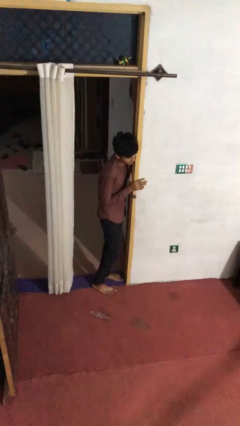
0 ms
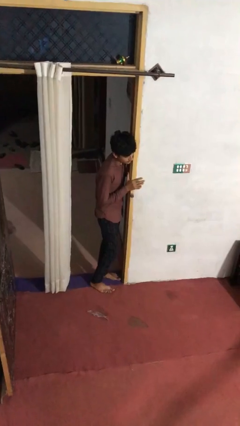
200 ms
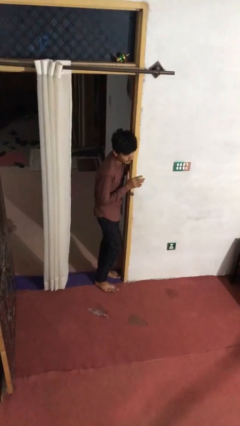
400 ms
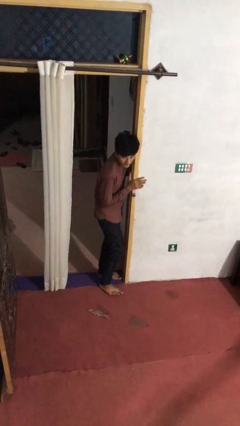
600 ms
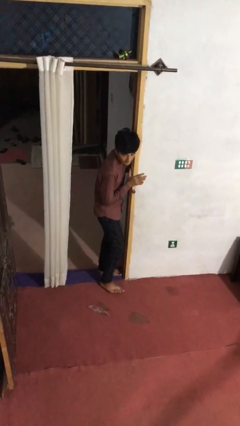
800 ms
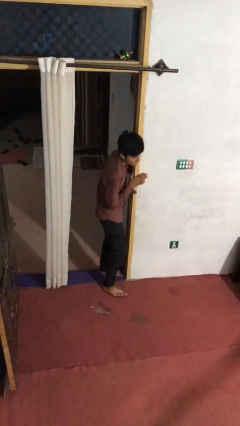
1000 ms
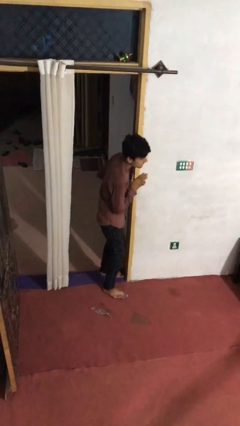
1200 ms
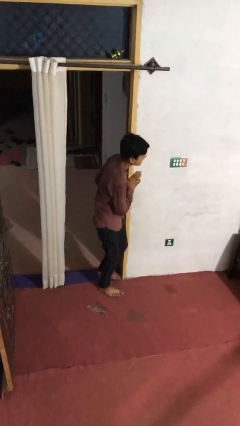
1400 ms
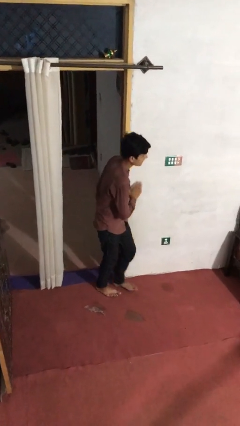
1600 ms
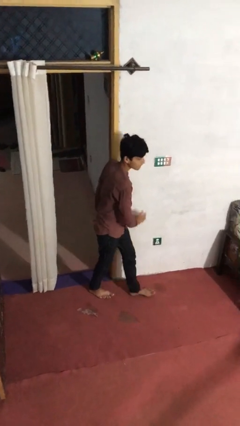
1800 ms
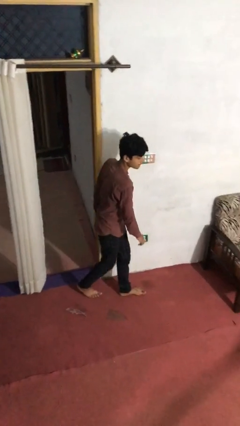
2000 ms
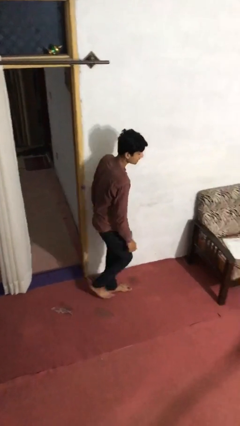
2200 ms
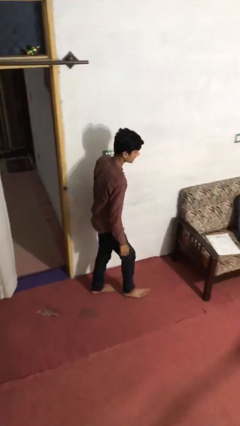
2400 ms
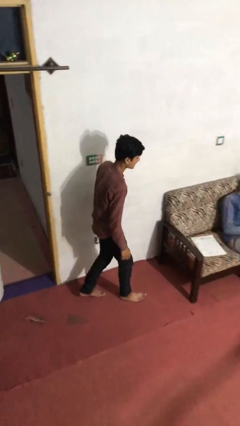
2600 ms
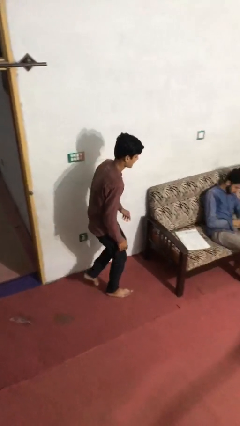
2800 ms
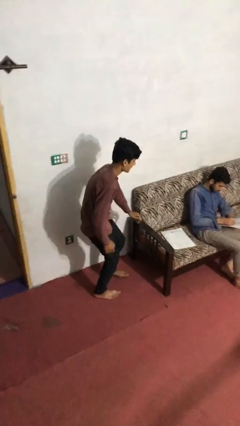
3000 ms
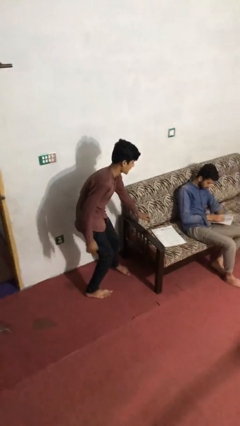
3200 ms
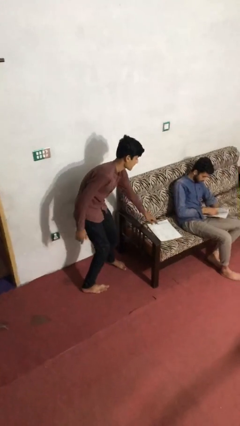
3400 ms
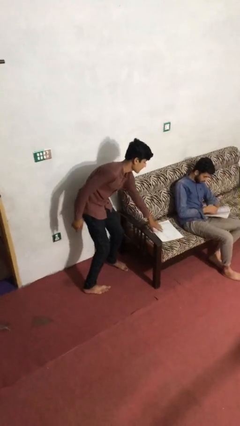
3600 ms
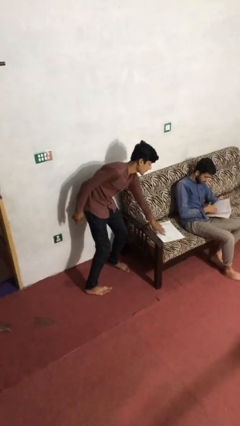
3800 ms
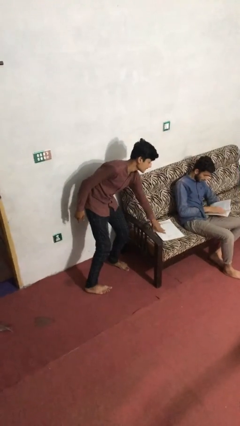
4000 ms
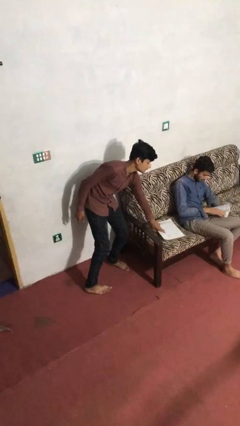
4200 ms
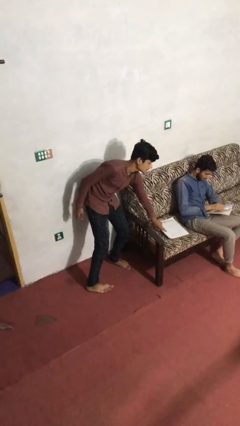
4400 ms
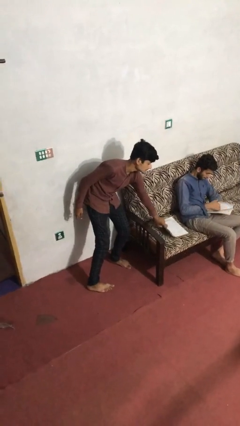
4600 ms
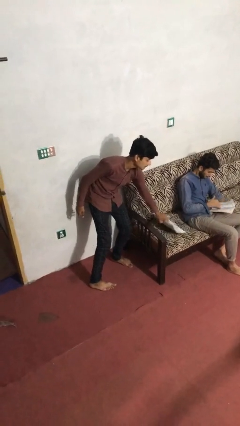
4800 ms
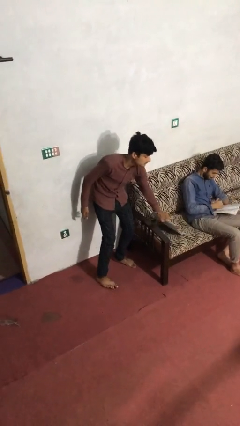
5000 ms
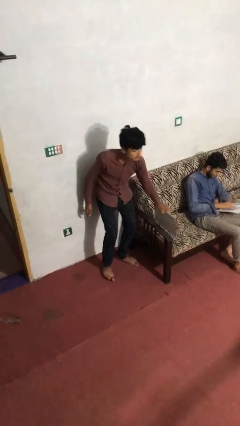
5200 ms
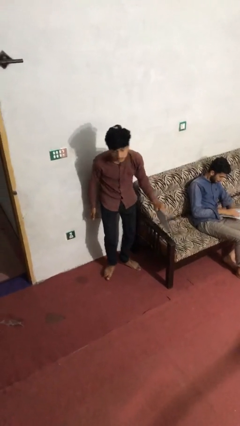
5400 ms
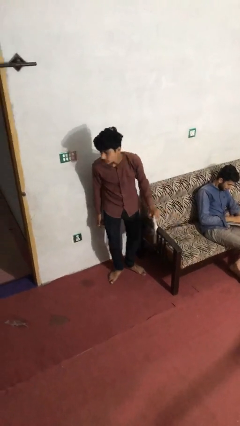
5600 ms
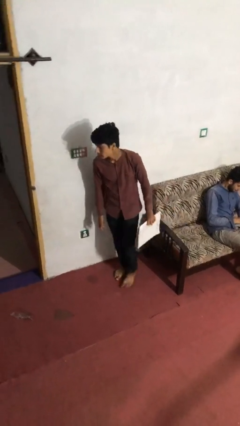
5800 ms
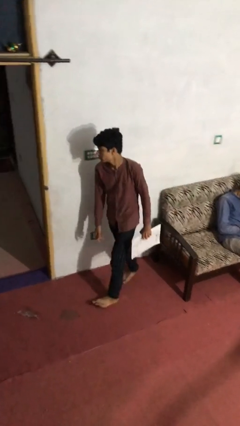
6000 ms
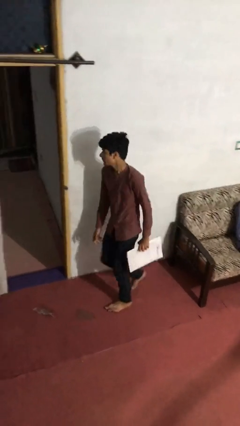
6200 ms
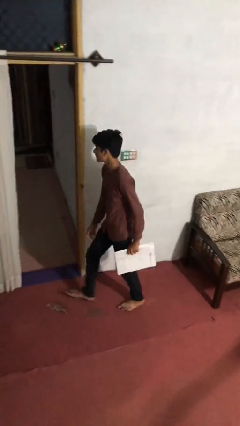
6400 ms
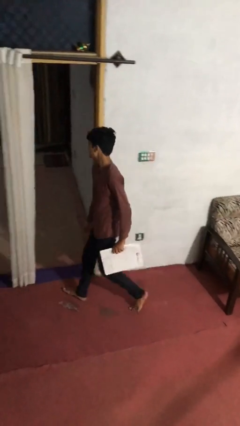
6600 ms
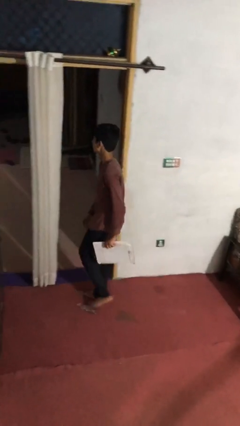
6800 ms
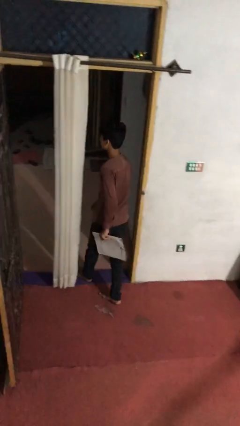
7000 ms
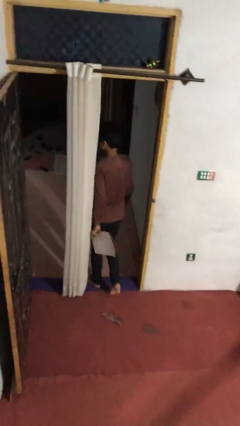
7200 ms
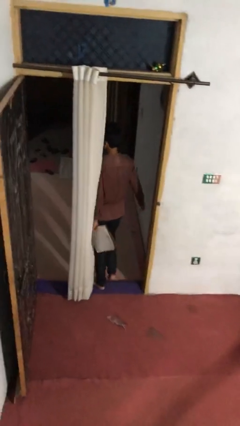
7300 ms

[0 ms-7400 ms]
person steals object from person

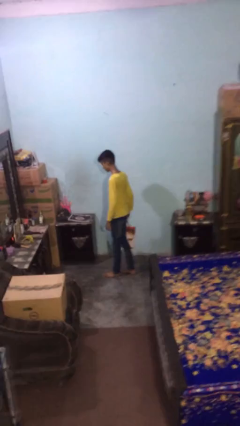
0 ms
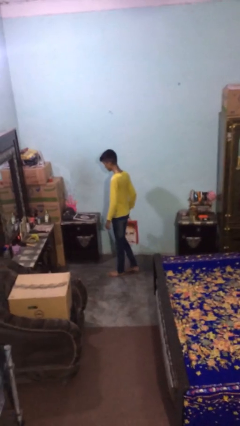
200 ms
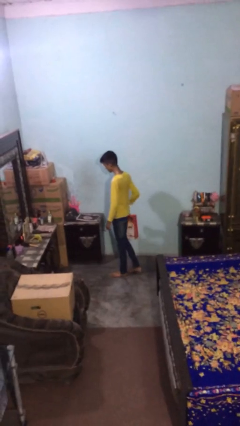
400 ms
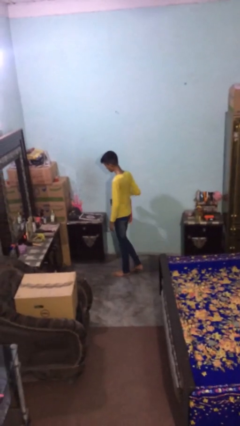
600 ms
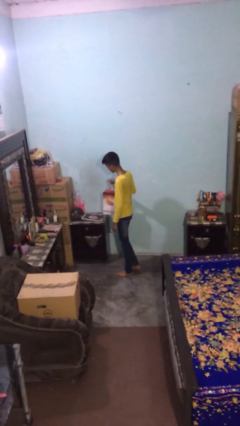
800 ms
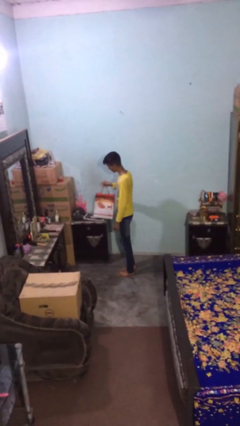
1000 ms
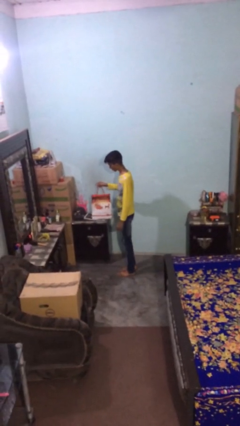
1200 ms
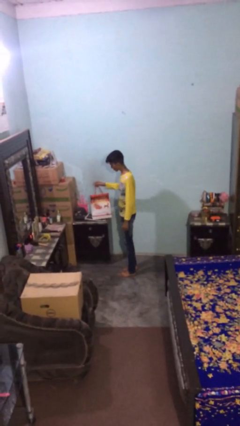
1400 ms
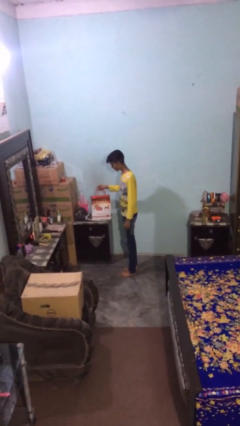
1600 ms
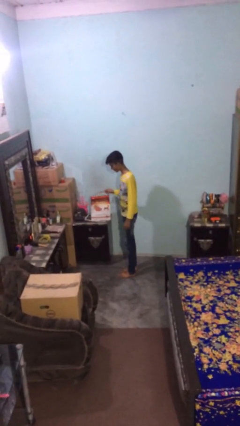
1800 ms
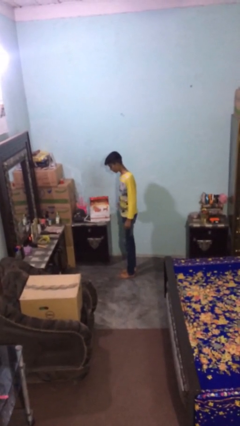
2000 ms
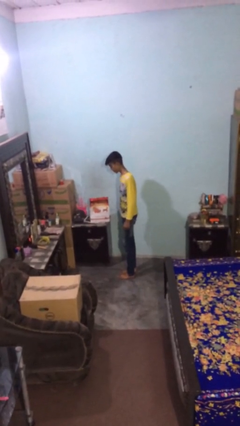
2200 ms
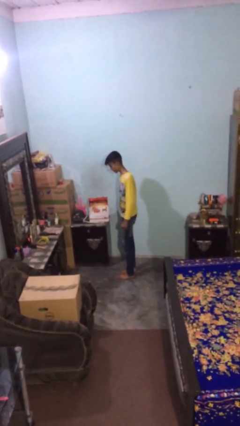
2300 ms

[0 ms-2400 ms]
person puts down object on table

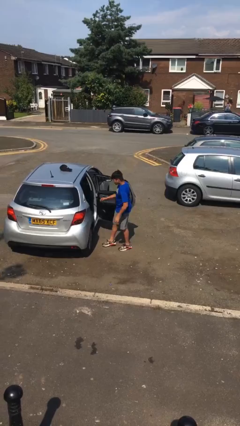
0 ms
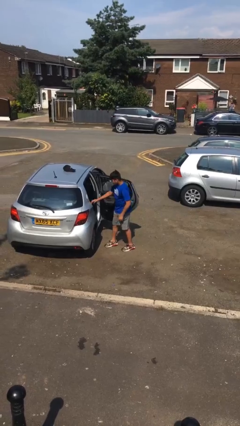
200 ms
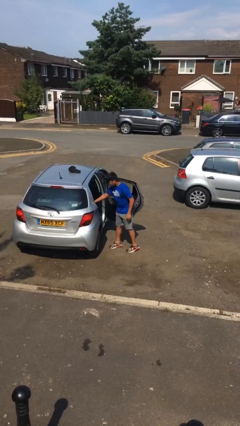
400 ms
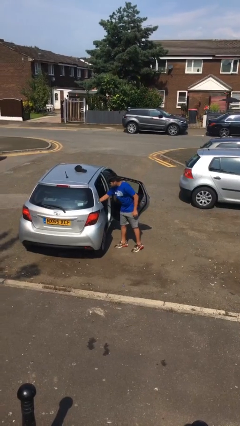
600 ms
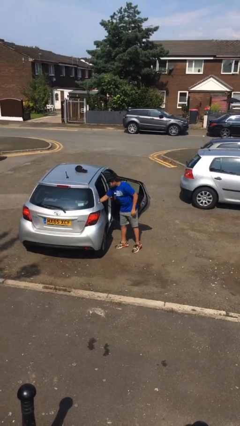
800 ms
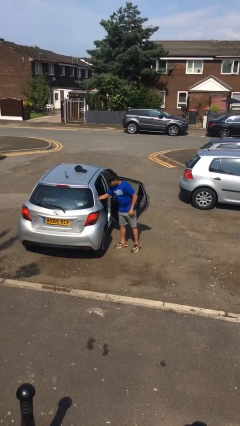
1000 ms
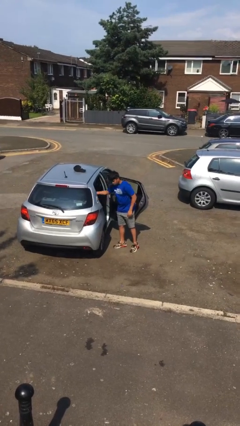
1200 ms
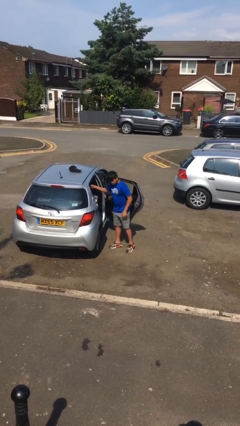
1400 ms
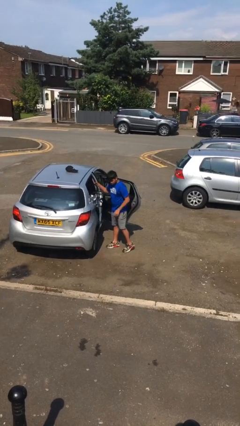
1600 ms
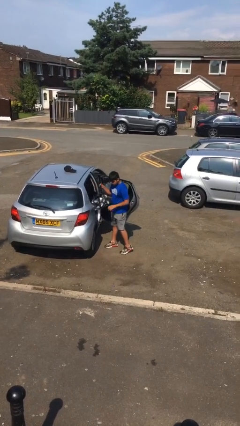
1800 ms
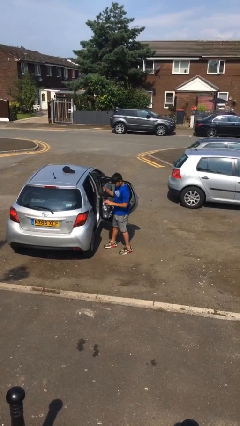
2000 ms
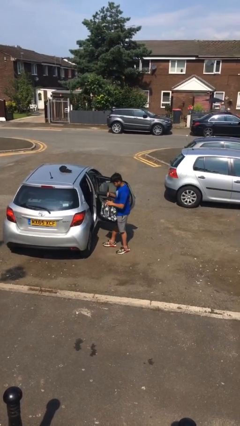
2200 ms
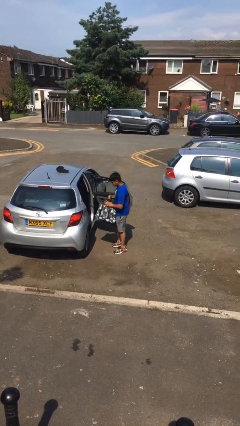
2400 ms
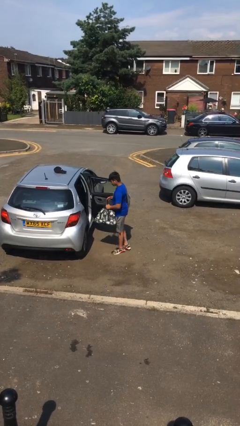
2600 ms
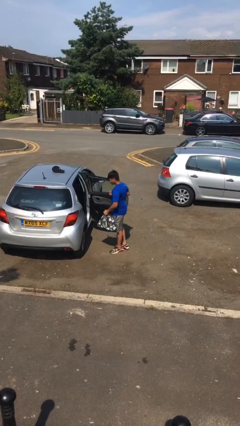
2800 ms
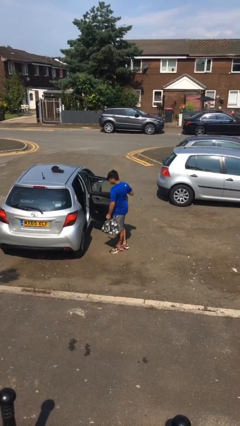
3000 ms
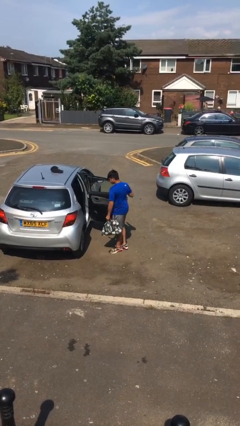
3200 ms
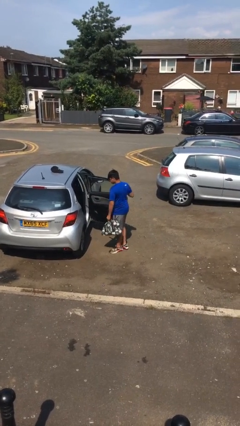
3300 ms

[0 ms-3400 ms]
person unloads car

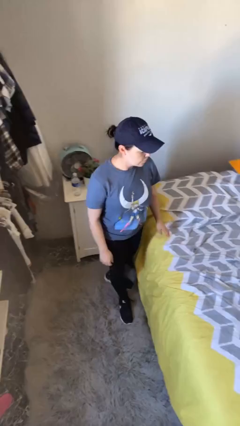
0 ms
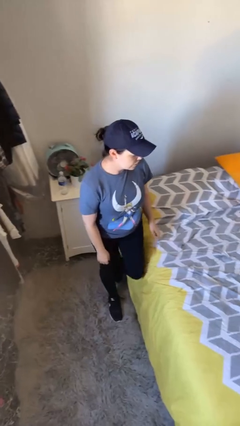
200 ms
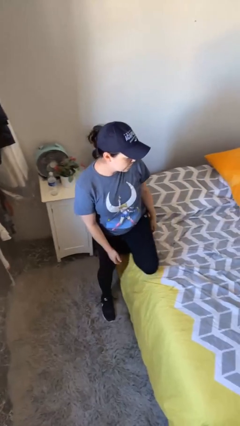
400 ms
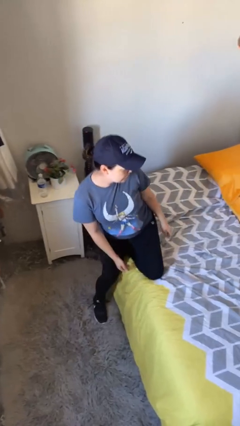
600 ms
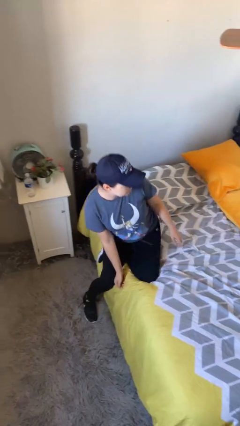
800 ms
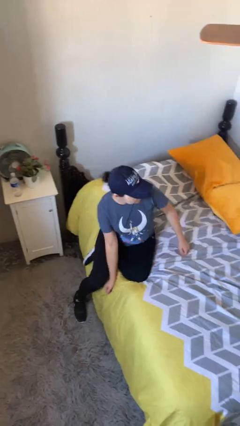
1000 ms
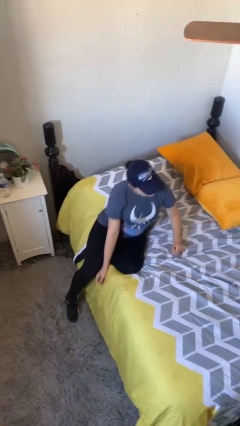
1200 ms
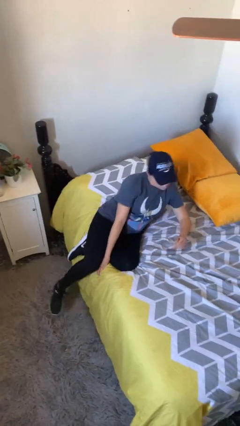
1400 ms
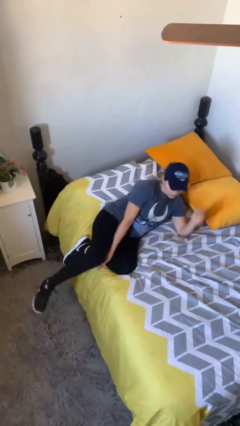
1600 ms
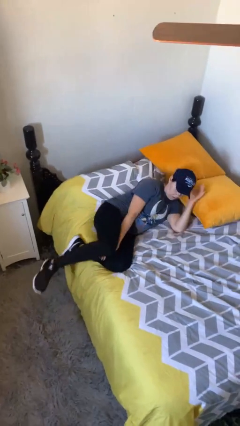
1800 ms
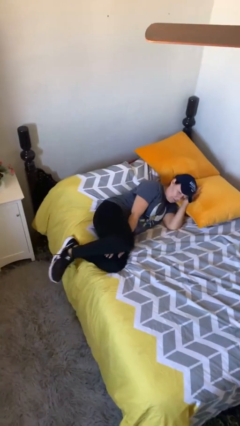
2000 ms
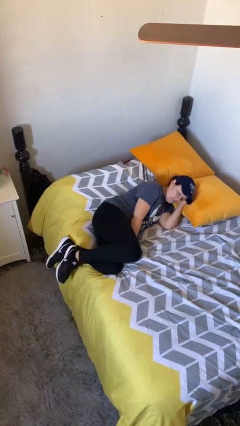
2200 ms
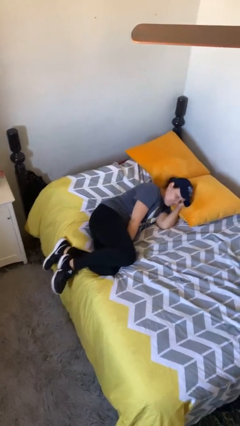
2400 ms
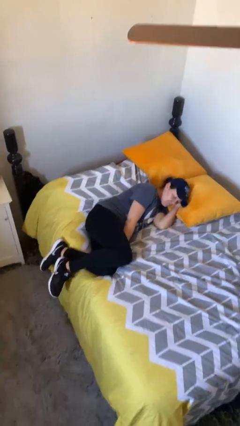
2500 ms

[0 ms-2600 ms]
person lies down on bed

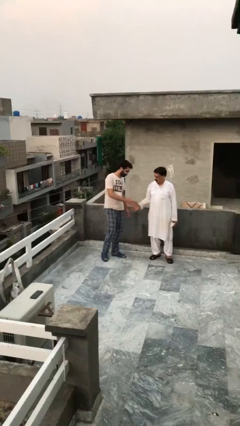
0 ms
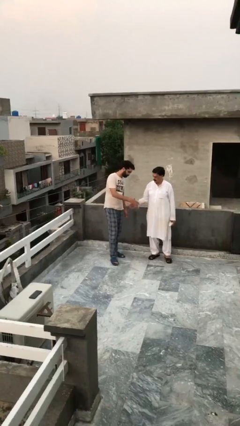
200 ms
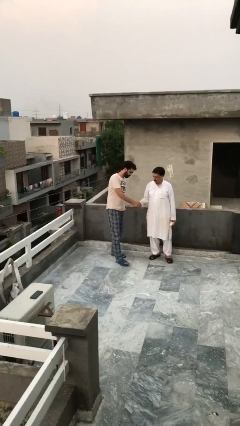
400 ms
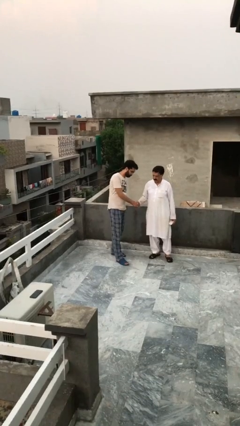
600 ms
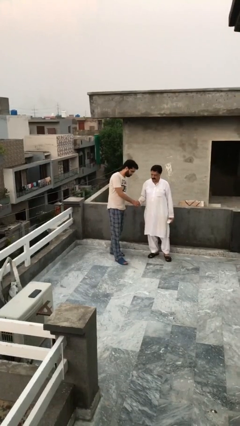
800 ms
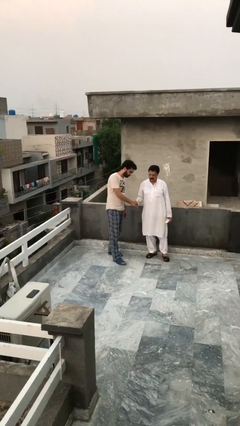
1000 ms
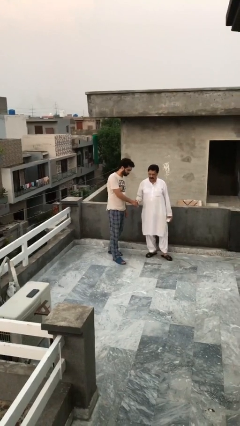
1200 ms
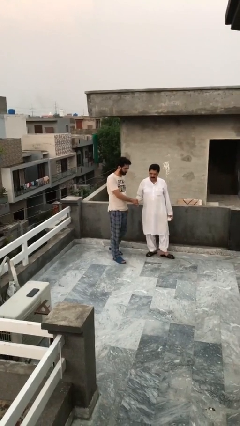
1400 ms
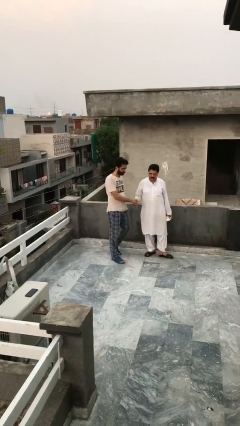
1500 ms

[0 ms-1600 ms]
person shakes hand
